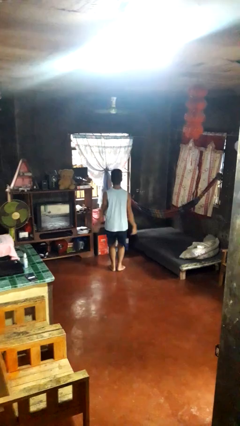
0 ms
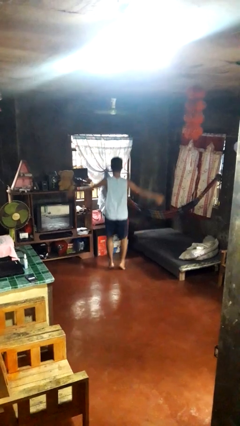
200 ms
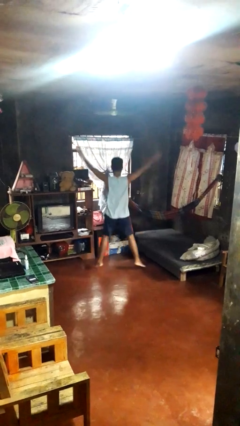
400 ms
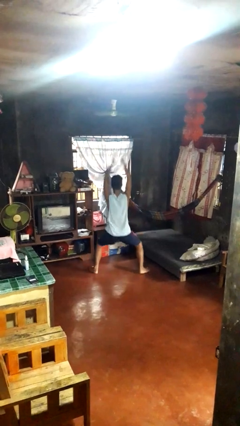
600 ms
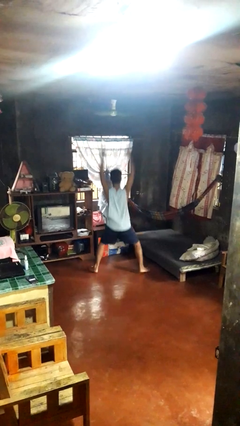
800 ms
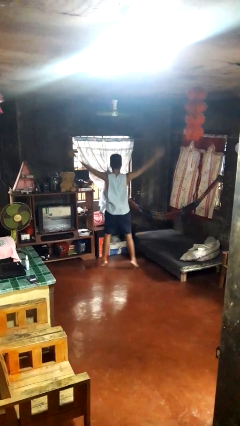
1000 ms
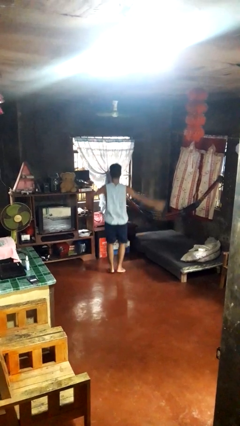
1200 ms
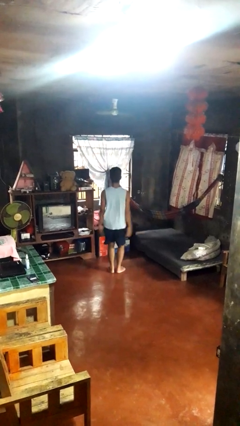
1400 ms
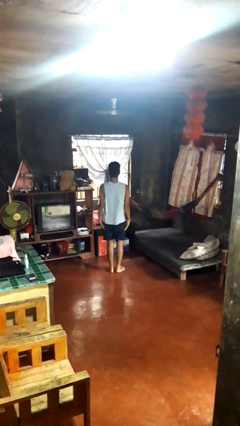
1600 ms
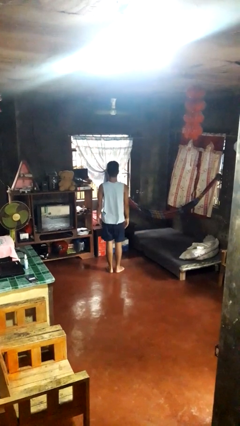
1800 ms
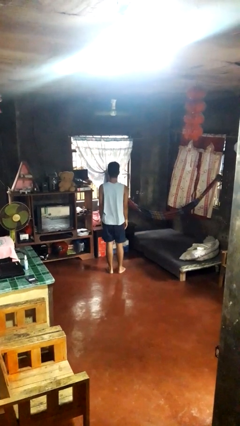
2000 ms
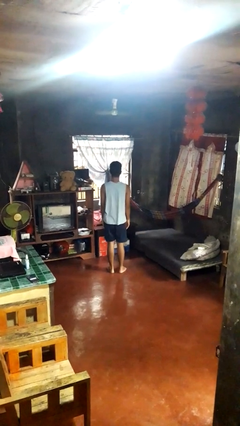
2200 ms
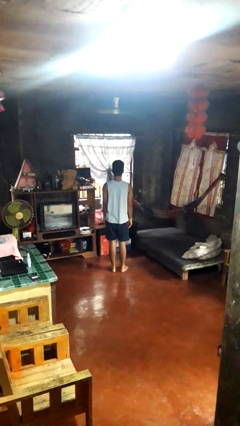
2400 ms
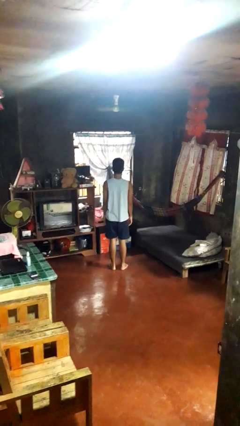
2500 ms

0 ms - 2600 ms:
person exercises with jumping jacks

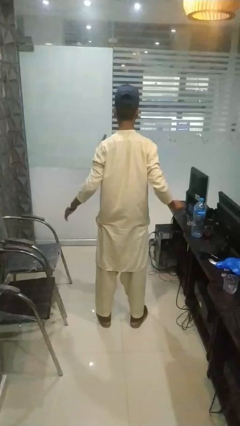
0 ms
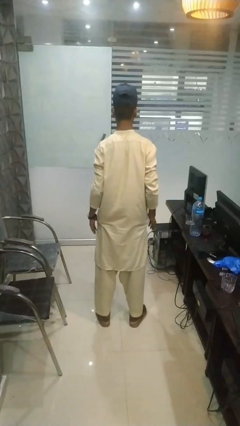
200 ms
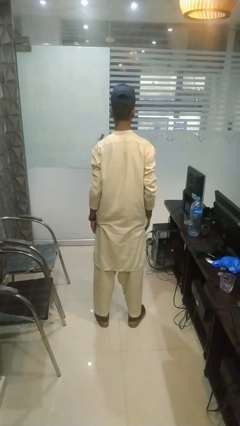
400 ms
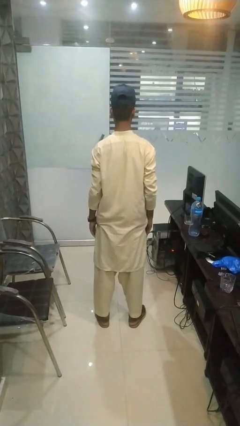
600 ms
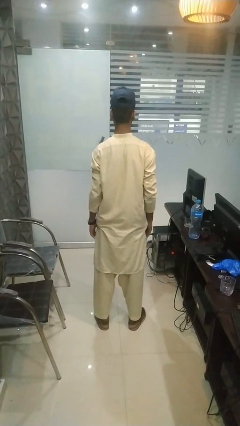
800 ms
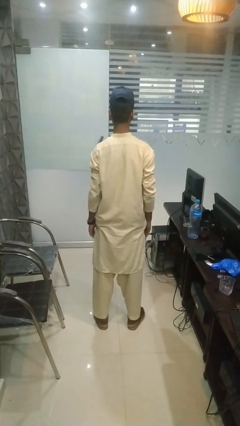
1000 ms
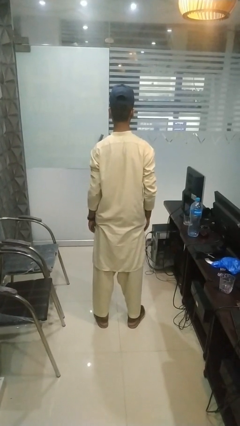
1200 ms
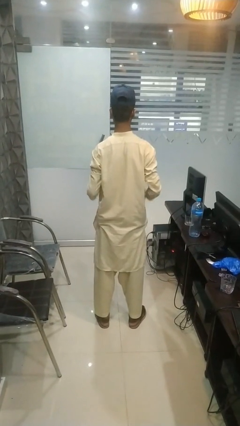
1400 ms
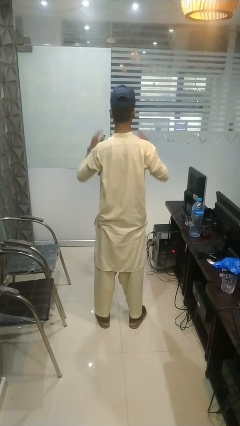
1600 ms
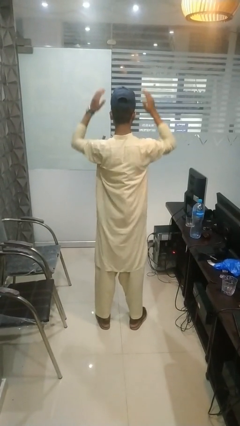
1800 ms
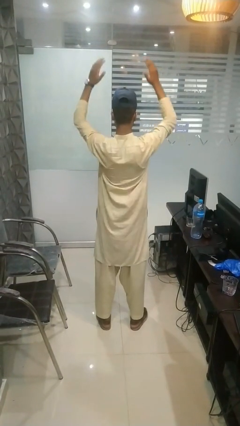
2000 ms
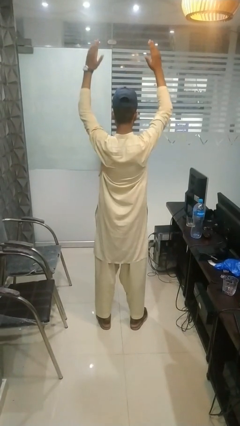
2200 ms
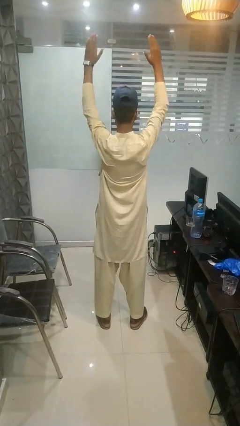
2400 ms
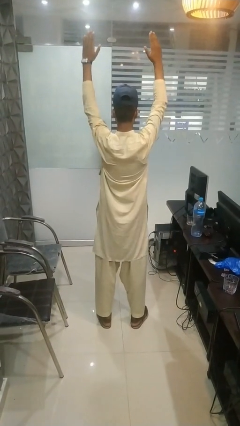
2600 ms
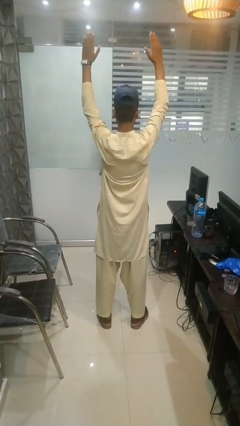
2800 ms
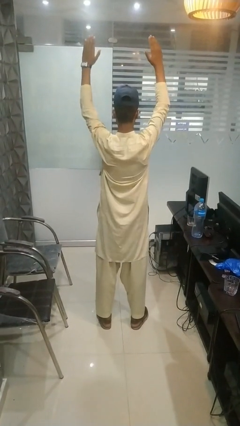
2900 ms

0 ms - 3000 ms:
person stretches arms over head

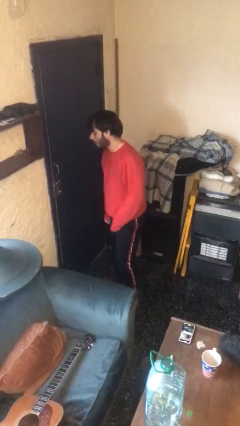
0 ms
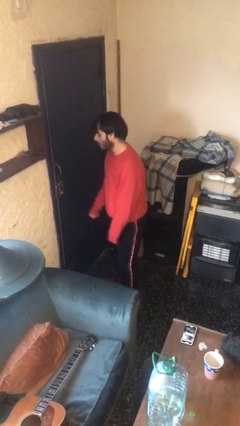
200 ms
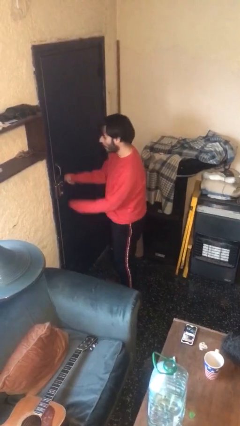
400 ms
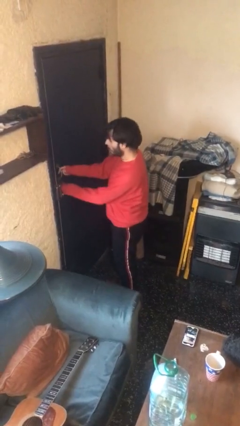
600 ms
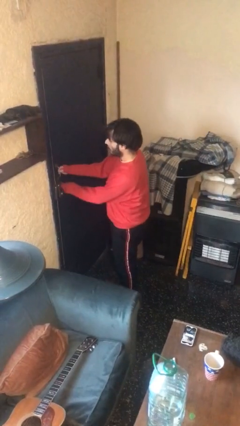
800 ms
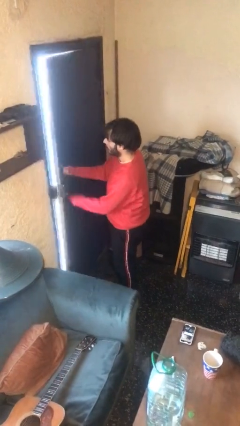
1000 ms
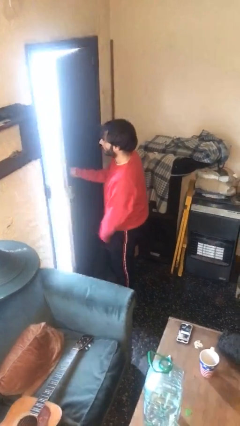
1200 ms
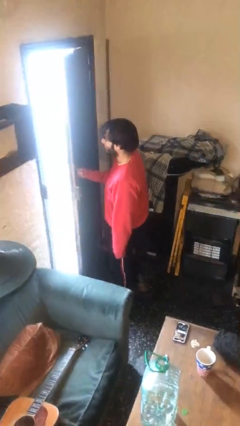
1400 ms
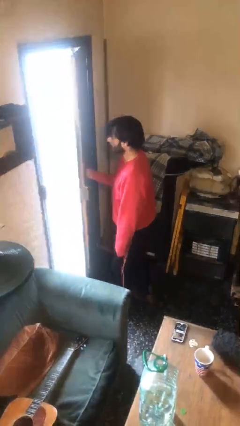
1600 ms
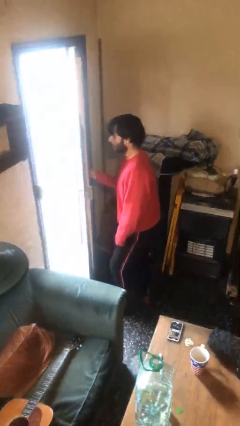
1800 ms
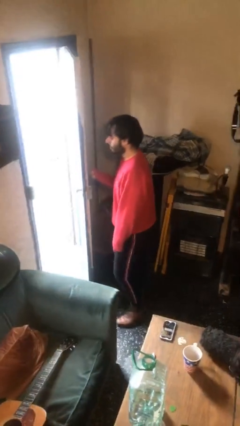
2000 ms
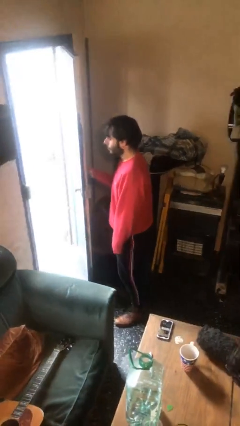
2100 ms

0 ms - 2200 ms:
person opens facility door

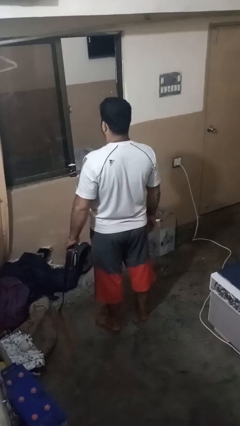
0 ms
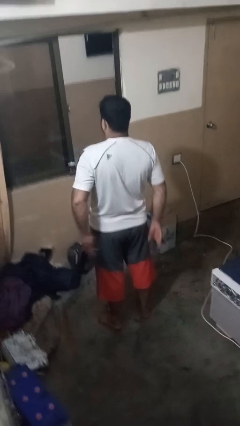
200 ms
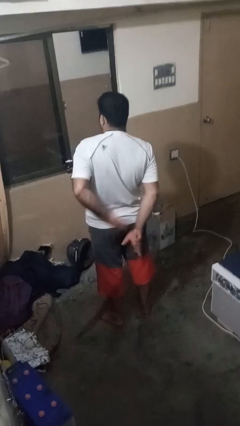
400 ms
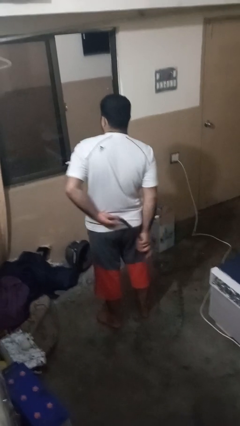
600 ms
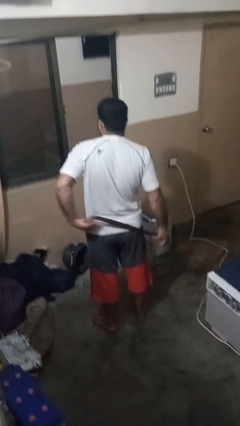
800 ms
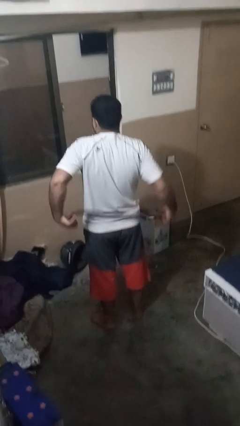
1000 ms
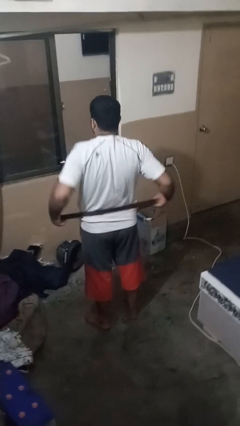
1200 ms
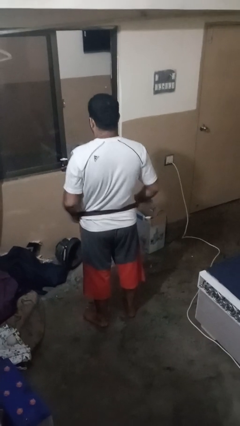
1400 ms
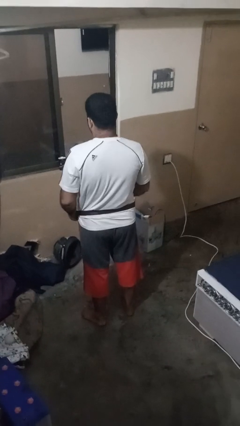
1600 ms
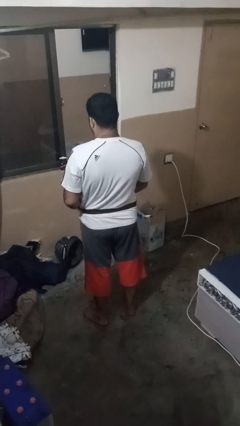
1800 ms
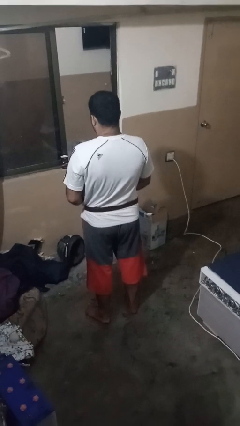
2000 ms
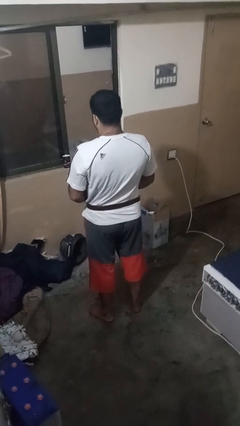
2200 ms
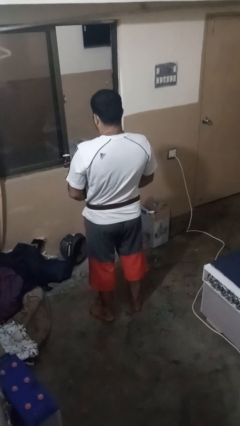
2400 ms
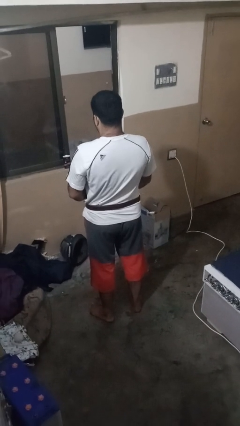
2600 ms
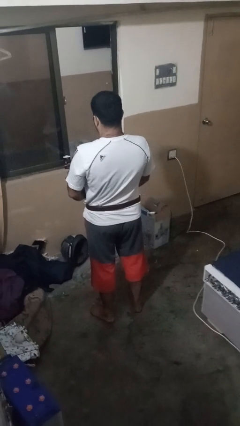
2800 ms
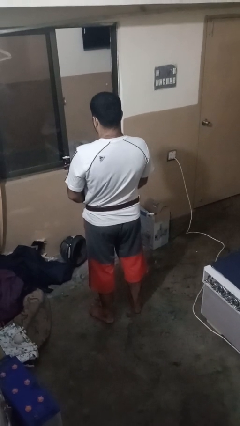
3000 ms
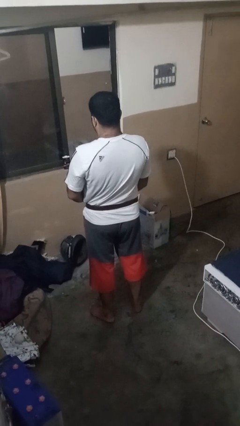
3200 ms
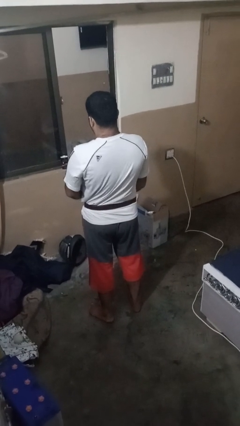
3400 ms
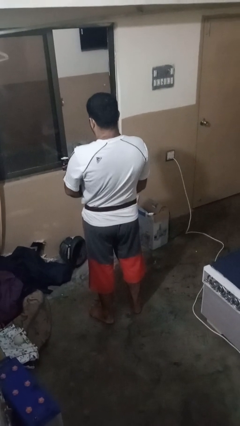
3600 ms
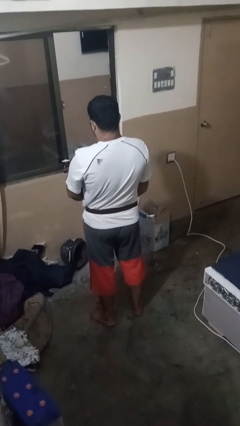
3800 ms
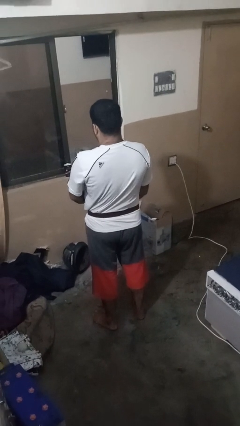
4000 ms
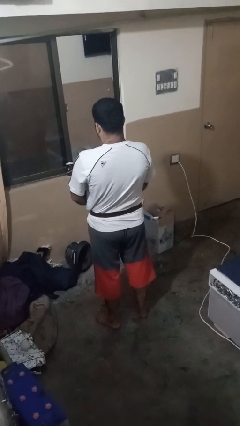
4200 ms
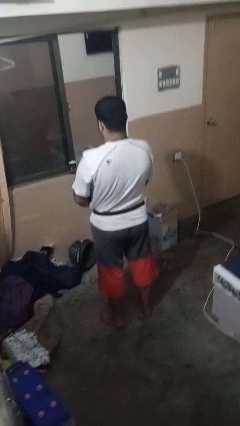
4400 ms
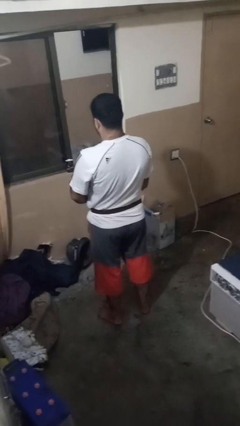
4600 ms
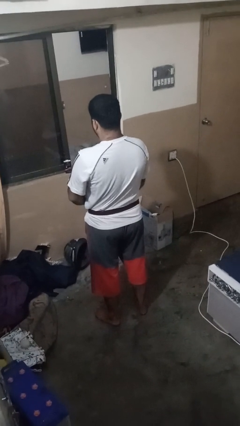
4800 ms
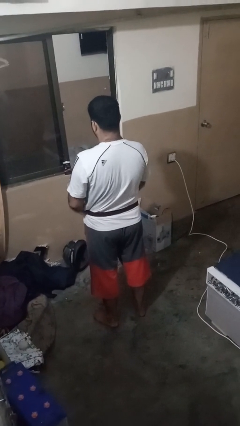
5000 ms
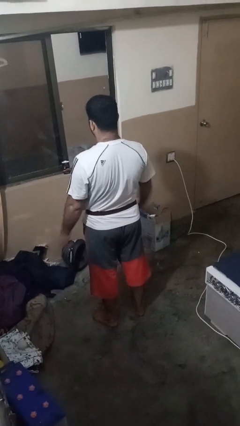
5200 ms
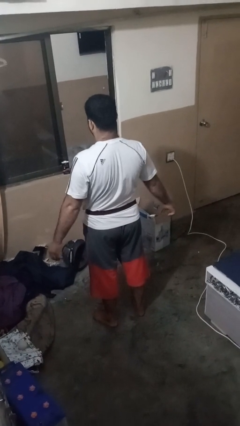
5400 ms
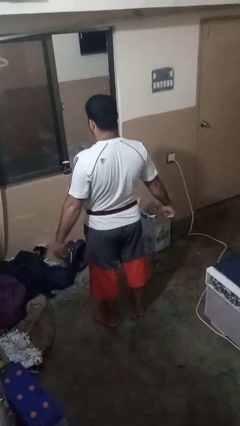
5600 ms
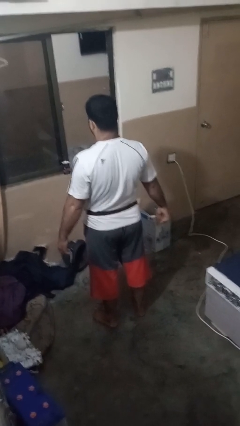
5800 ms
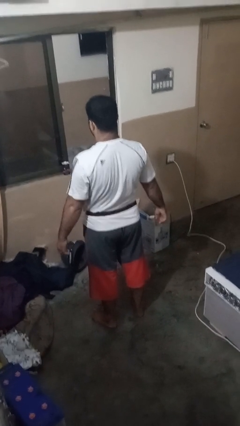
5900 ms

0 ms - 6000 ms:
person puts on belt

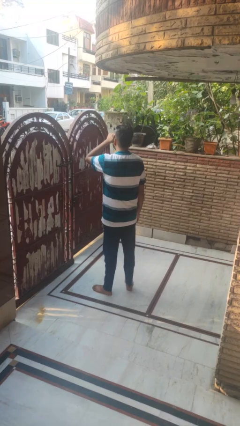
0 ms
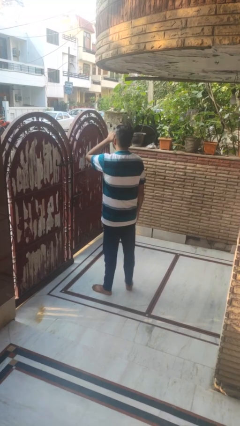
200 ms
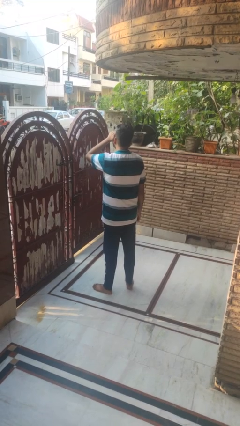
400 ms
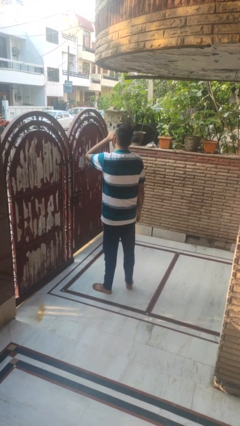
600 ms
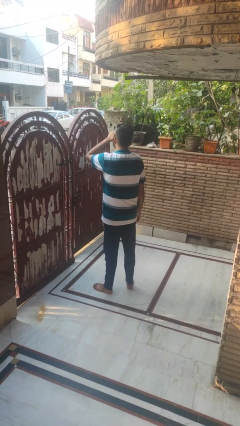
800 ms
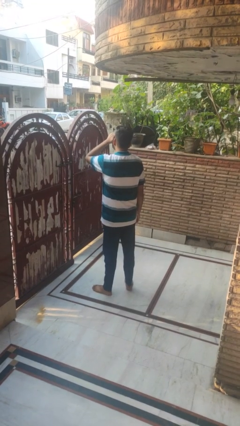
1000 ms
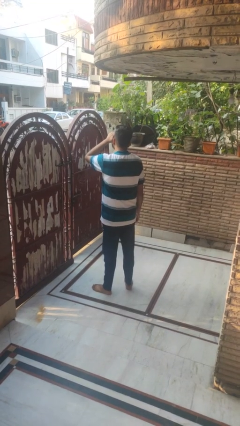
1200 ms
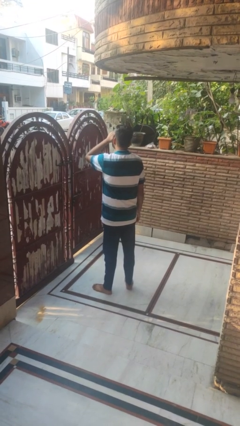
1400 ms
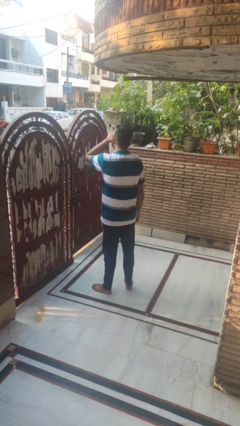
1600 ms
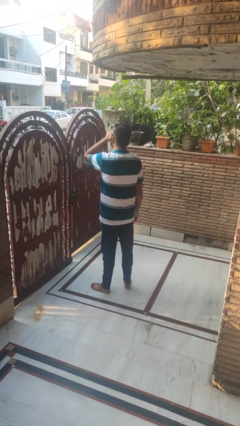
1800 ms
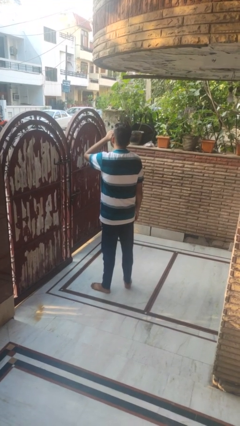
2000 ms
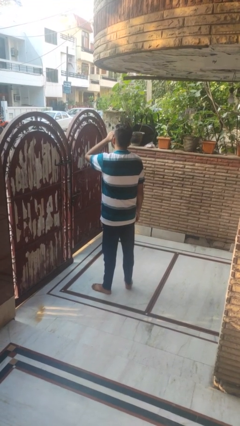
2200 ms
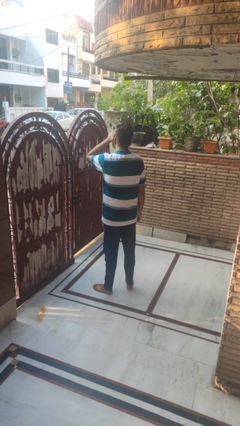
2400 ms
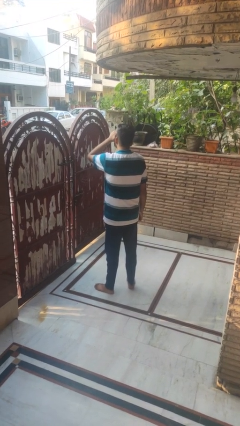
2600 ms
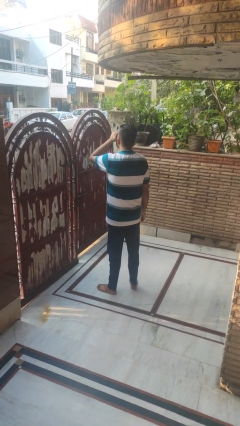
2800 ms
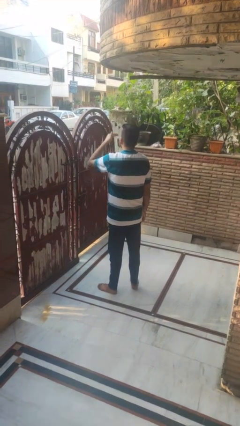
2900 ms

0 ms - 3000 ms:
person shades eyes

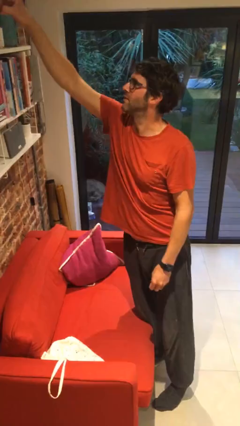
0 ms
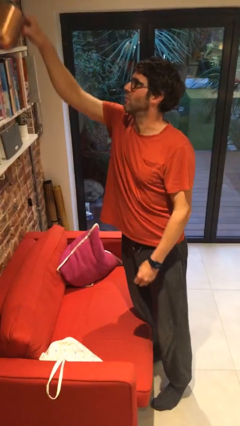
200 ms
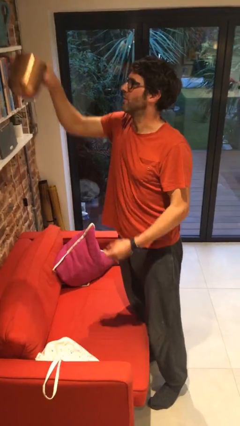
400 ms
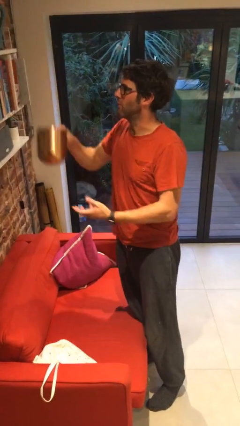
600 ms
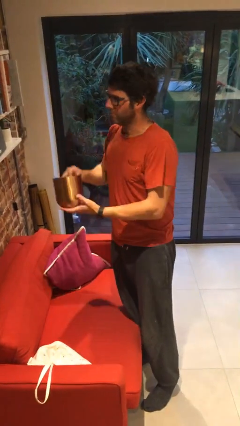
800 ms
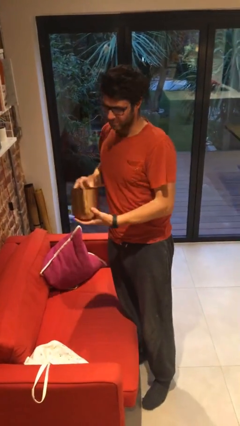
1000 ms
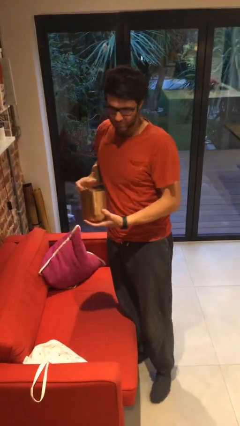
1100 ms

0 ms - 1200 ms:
person picks up object from shelf
